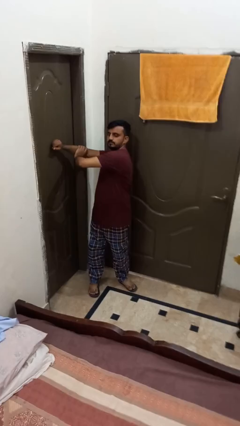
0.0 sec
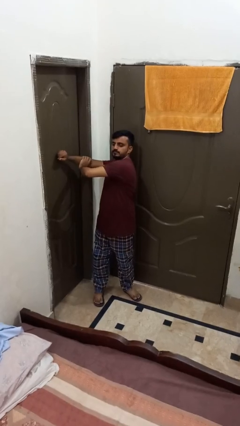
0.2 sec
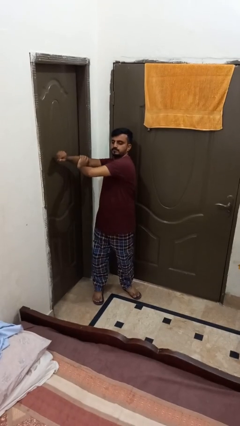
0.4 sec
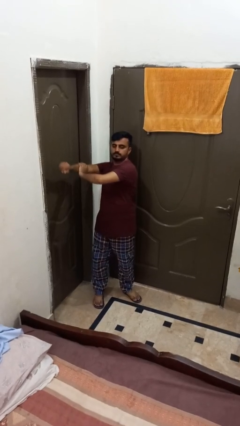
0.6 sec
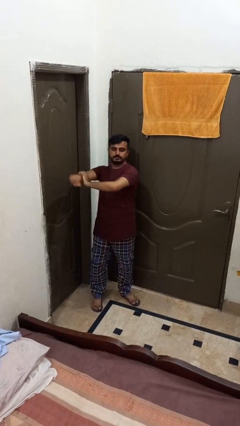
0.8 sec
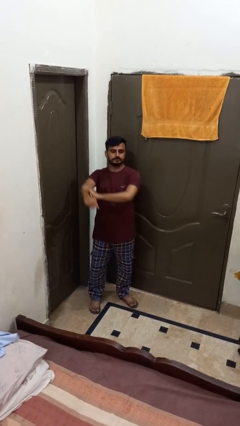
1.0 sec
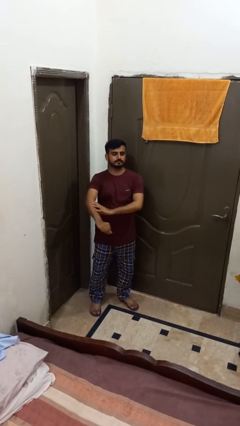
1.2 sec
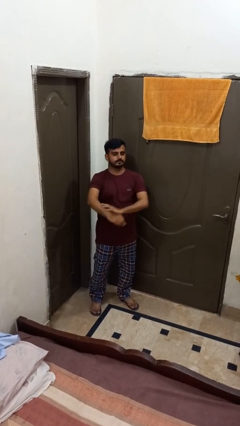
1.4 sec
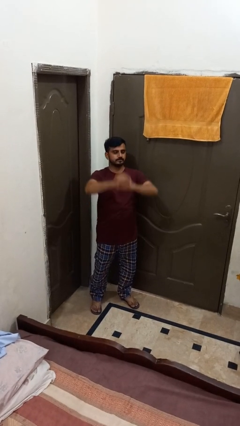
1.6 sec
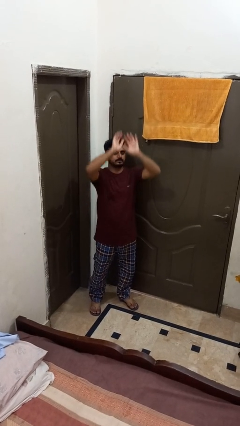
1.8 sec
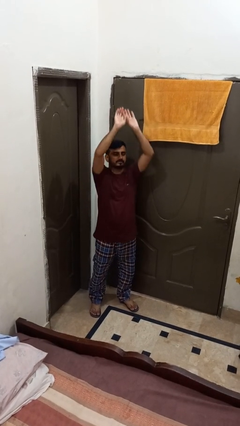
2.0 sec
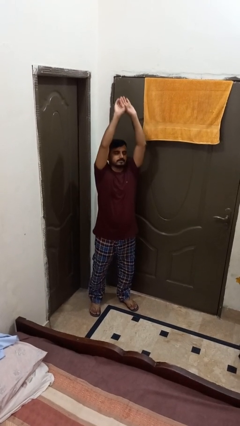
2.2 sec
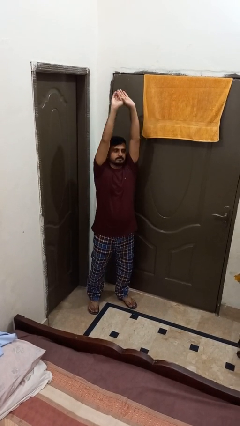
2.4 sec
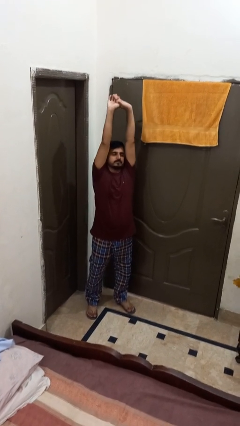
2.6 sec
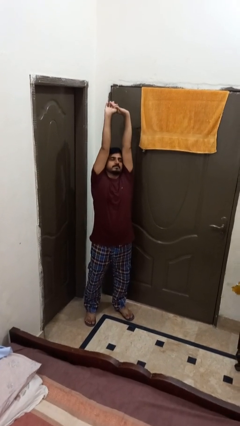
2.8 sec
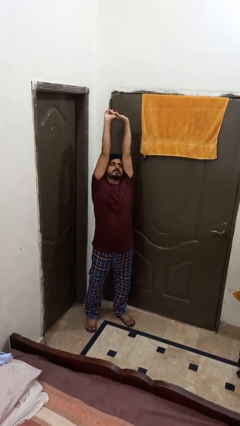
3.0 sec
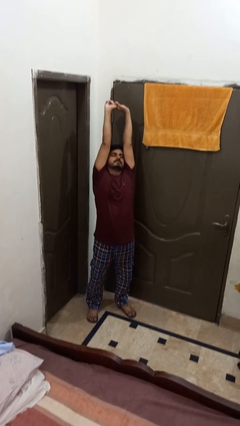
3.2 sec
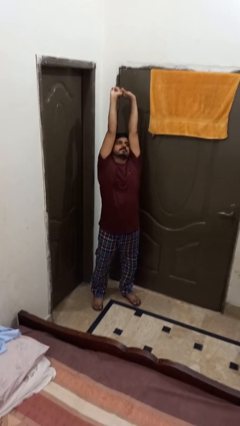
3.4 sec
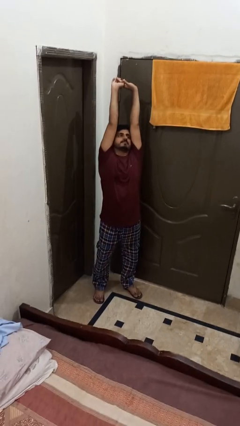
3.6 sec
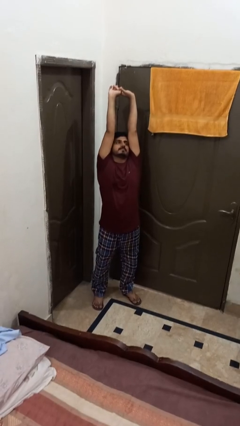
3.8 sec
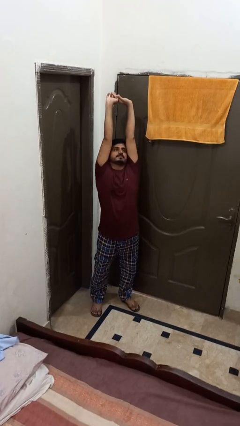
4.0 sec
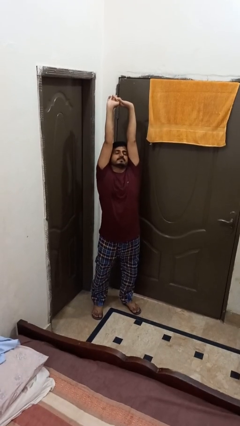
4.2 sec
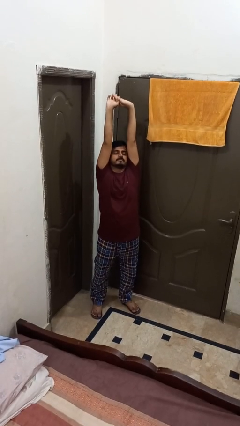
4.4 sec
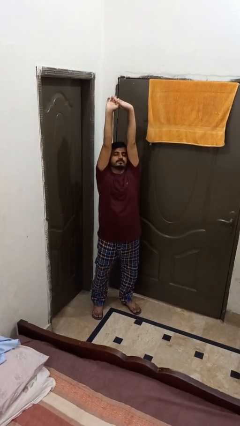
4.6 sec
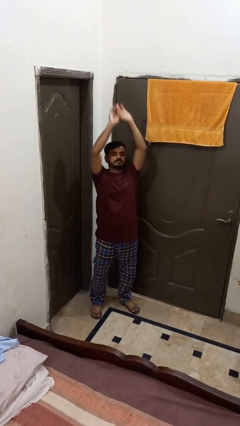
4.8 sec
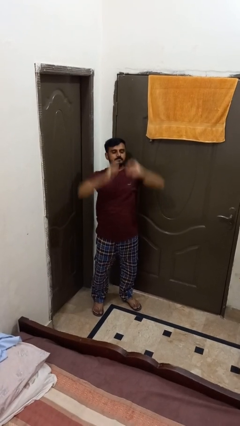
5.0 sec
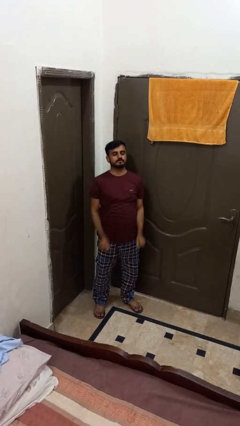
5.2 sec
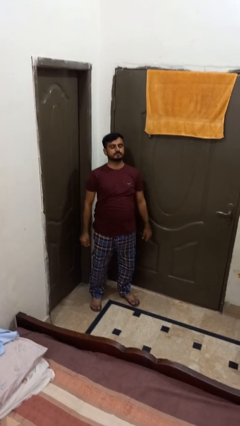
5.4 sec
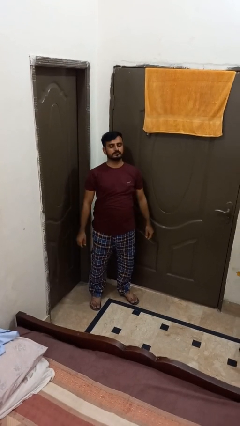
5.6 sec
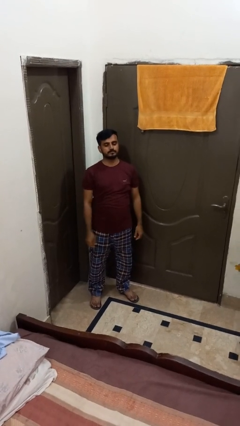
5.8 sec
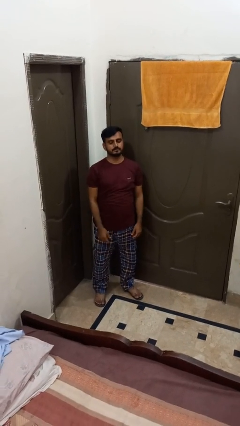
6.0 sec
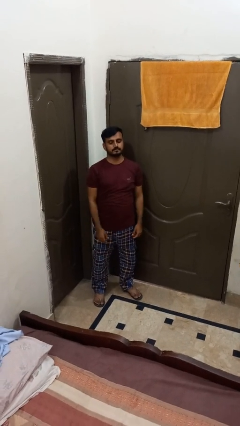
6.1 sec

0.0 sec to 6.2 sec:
person stretches arms over head

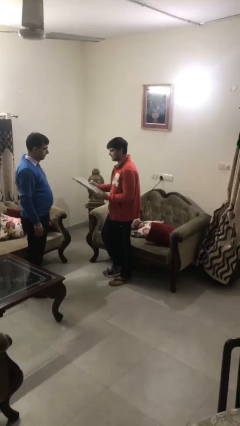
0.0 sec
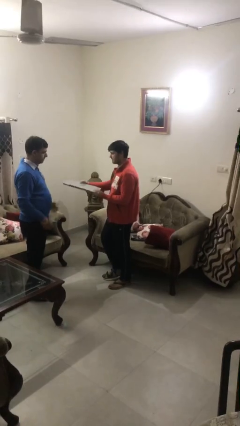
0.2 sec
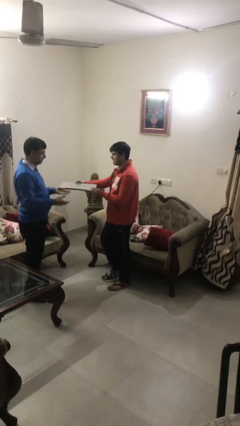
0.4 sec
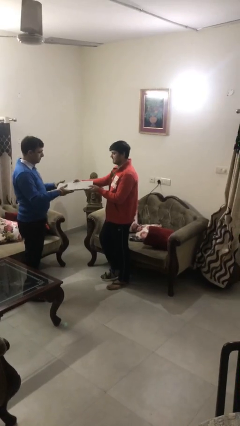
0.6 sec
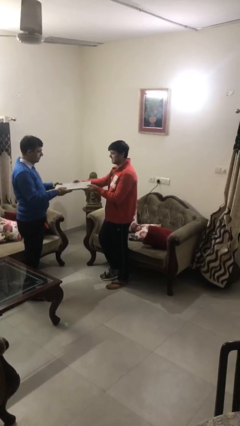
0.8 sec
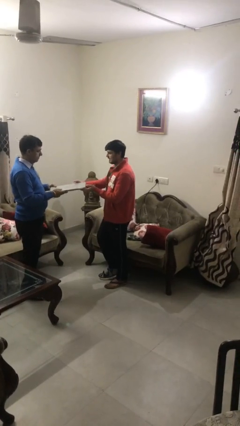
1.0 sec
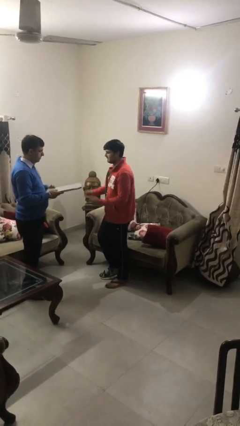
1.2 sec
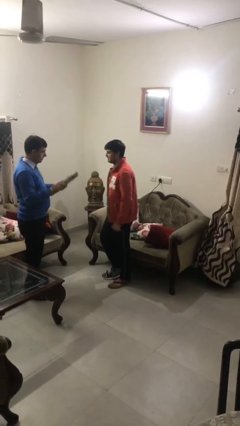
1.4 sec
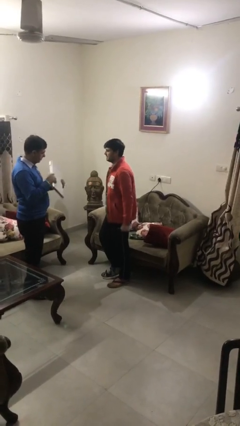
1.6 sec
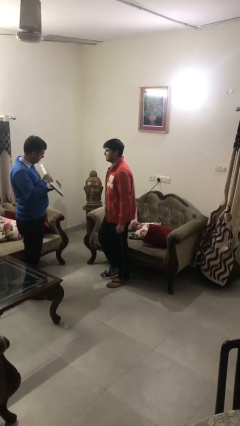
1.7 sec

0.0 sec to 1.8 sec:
person transfers object to person

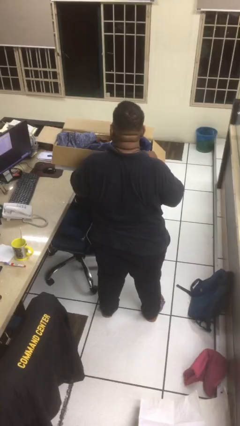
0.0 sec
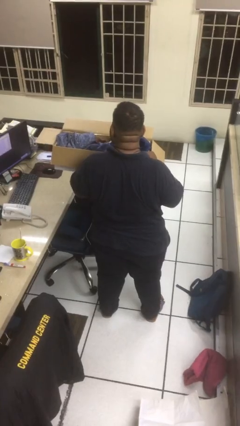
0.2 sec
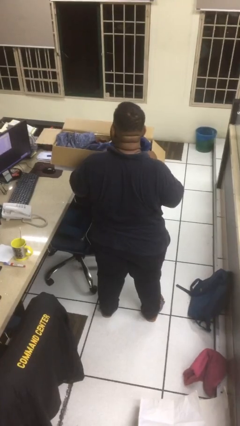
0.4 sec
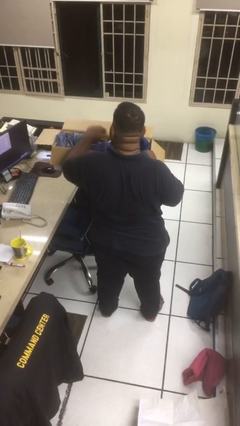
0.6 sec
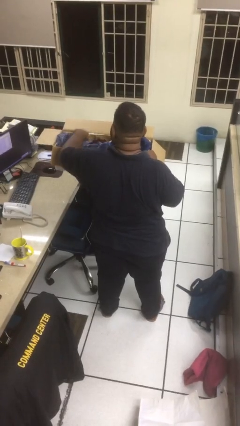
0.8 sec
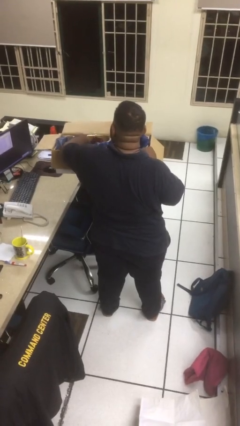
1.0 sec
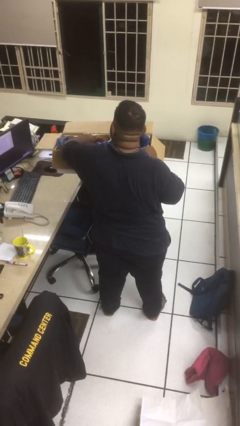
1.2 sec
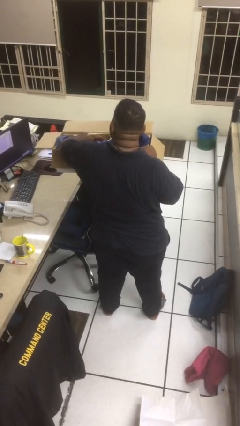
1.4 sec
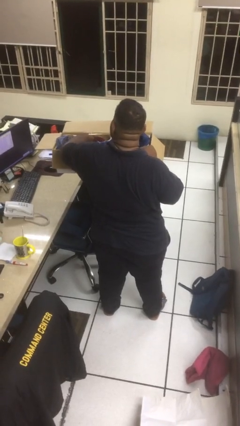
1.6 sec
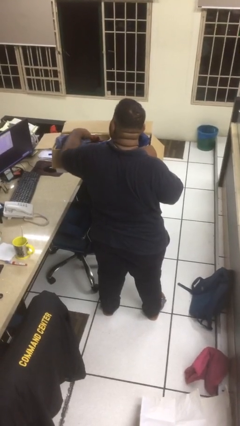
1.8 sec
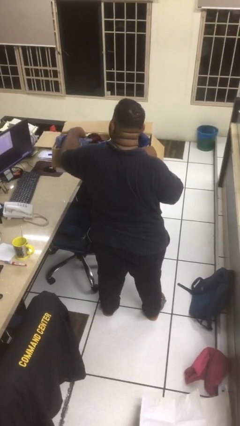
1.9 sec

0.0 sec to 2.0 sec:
person searches in box

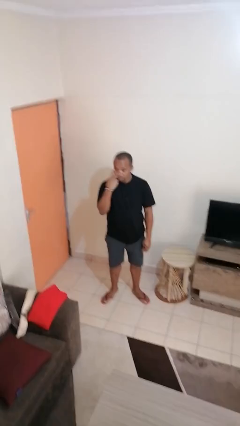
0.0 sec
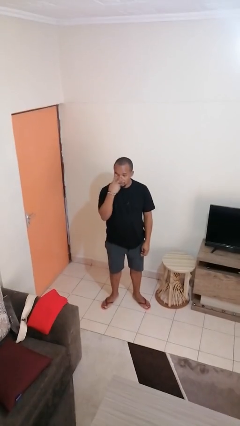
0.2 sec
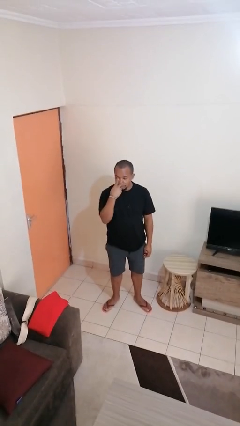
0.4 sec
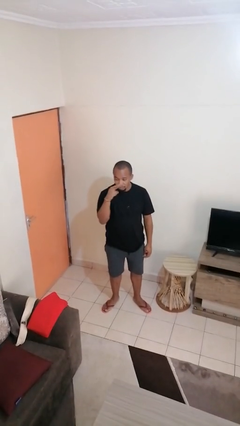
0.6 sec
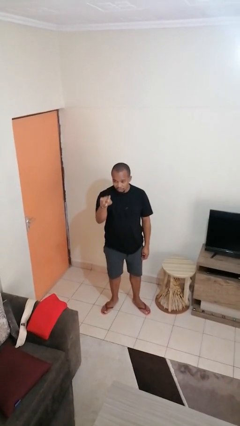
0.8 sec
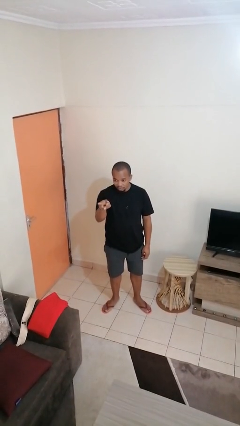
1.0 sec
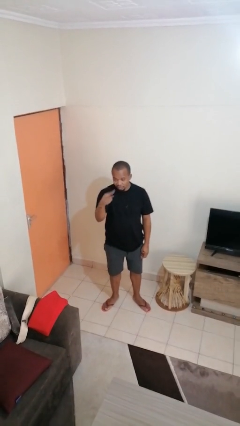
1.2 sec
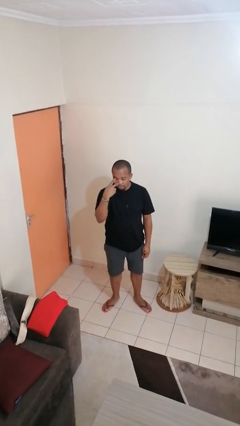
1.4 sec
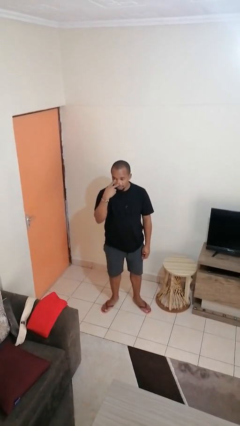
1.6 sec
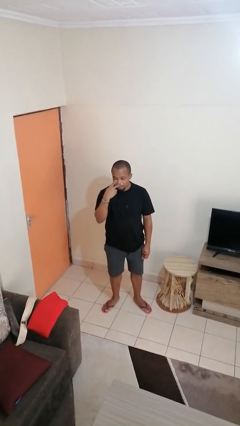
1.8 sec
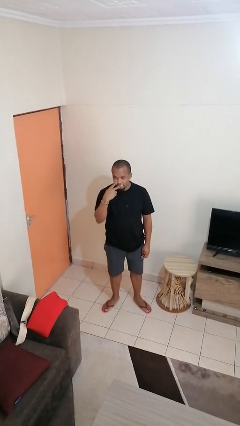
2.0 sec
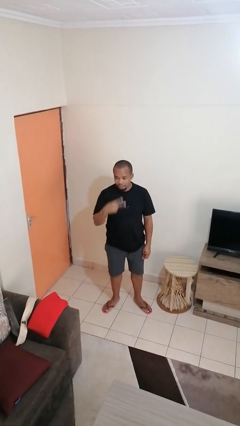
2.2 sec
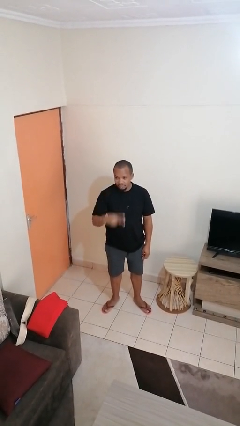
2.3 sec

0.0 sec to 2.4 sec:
person gestures watch closely

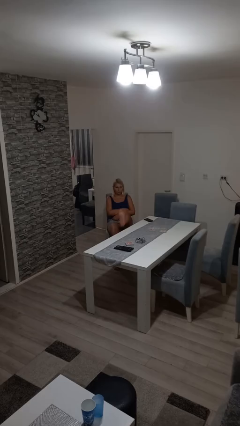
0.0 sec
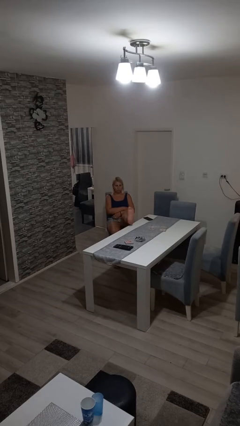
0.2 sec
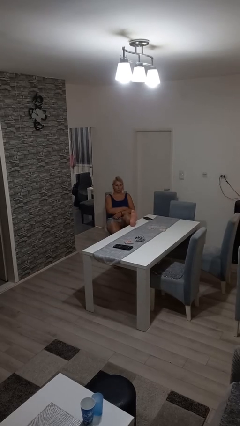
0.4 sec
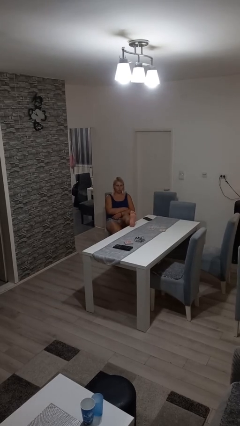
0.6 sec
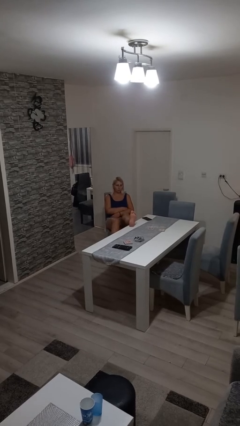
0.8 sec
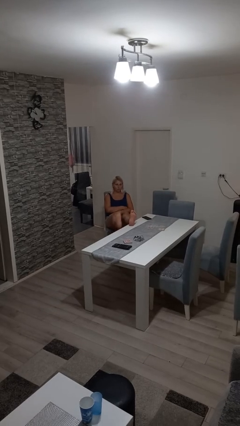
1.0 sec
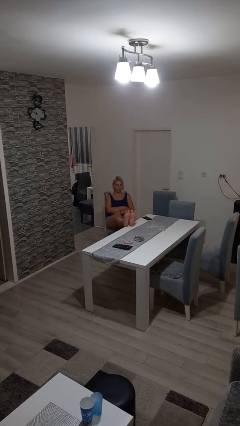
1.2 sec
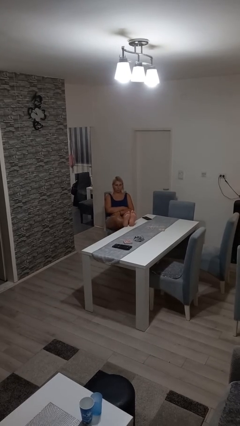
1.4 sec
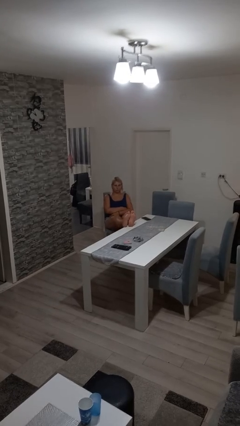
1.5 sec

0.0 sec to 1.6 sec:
person puts feet up

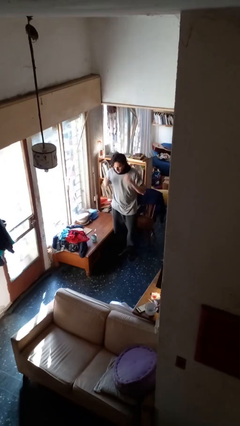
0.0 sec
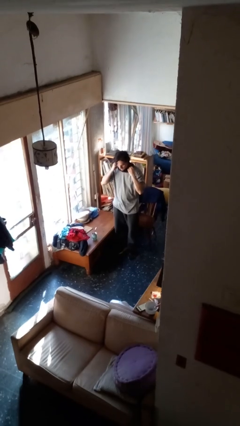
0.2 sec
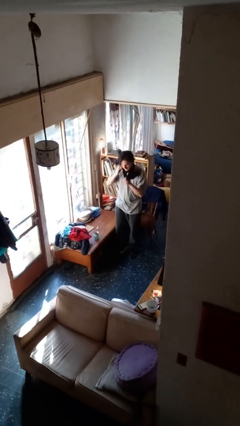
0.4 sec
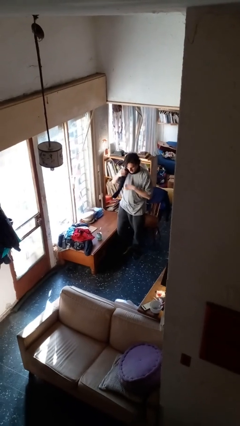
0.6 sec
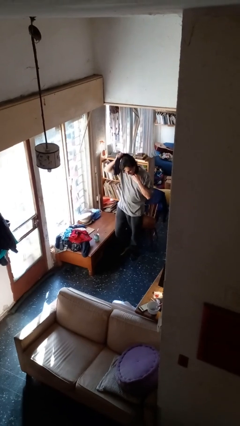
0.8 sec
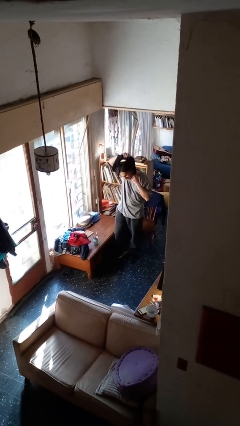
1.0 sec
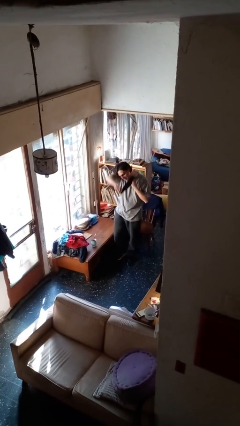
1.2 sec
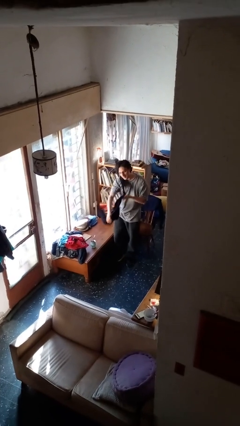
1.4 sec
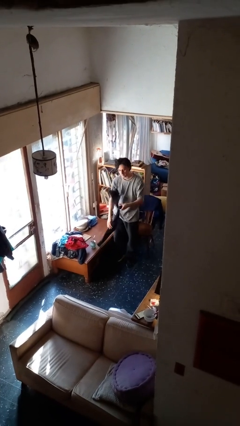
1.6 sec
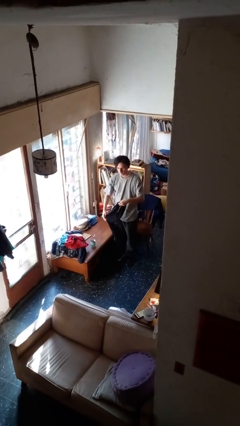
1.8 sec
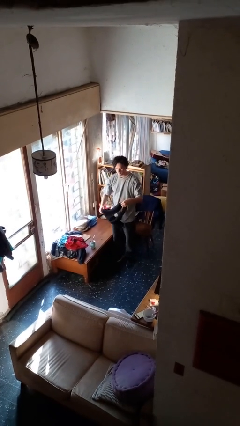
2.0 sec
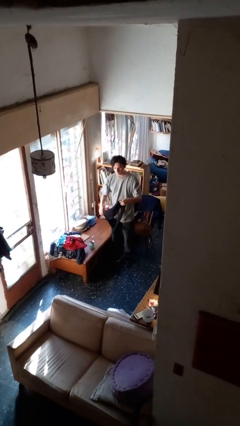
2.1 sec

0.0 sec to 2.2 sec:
person takes off scarf

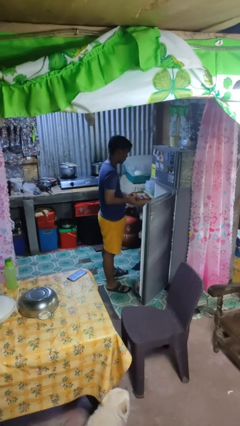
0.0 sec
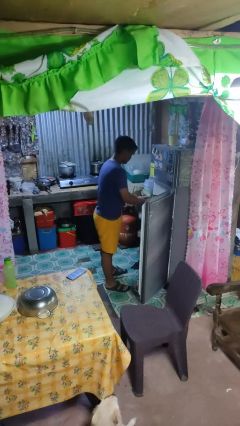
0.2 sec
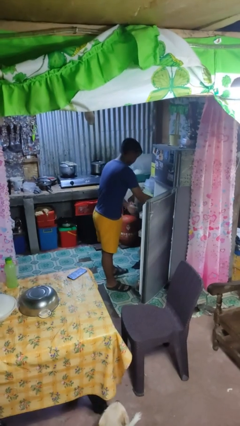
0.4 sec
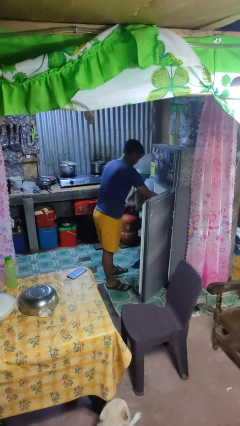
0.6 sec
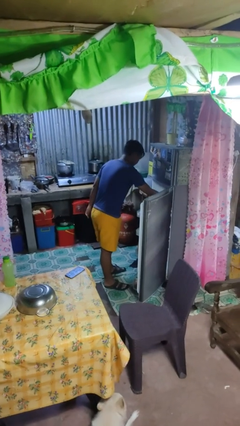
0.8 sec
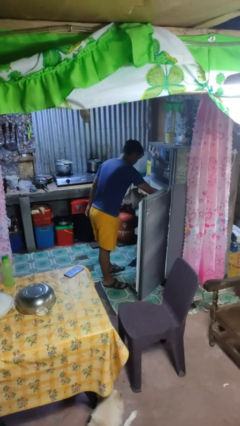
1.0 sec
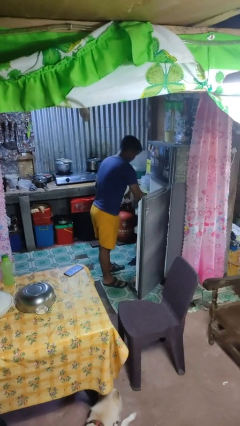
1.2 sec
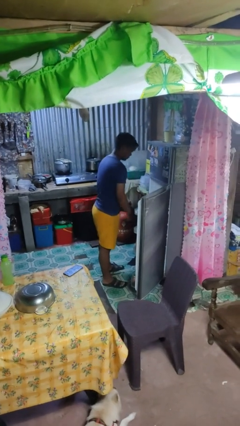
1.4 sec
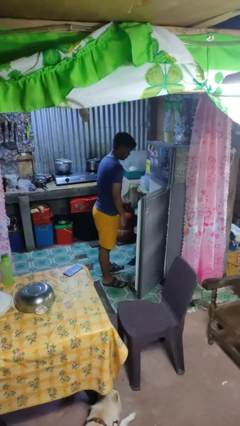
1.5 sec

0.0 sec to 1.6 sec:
person puts object into refrigerator
